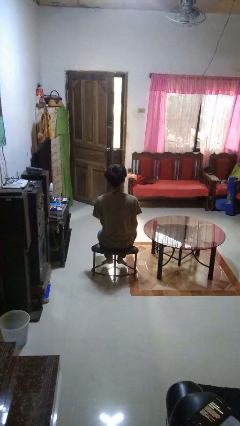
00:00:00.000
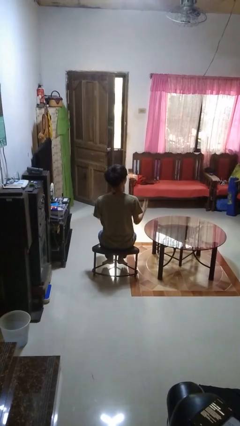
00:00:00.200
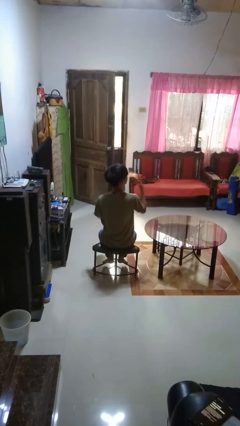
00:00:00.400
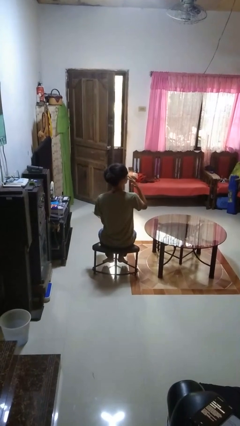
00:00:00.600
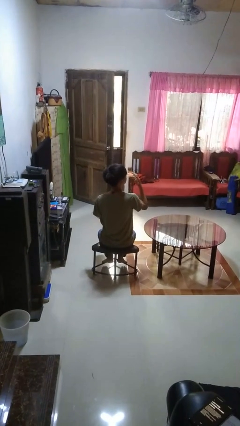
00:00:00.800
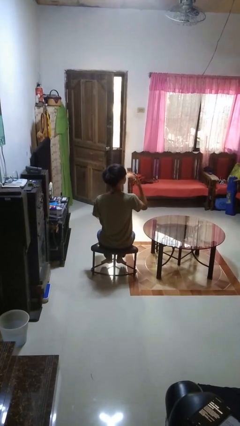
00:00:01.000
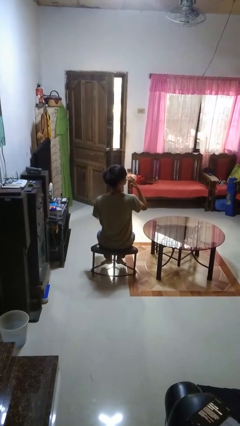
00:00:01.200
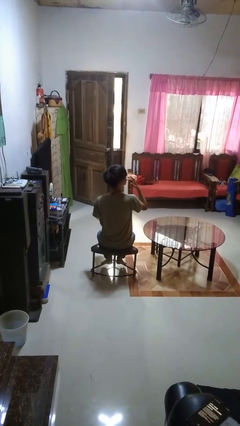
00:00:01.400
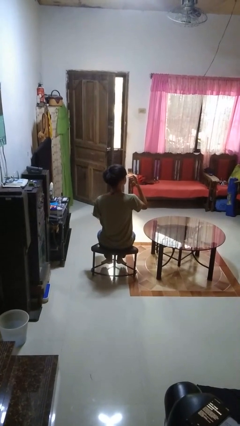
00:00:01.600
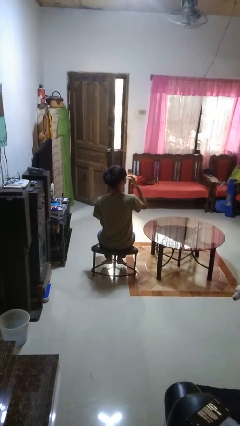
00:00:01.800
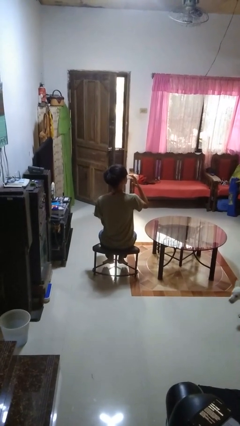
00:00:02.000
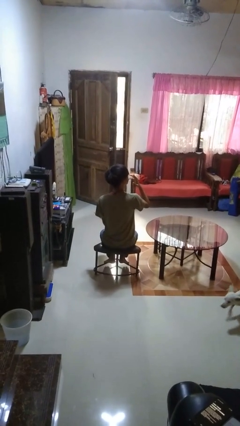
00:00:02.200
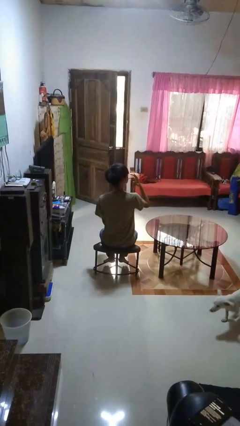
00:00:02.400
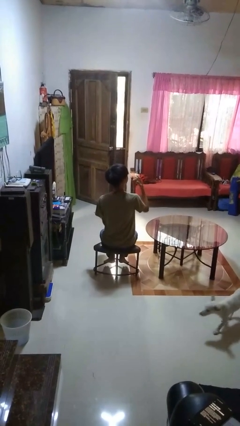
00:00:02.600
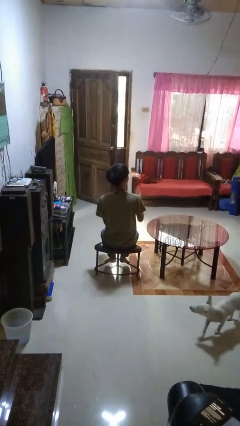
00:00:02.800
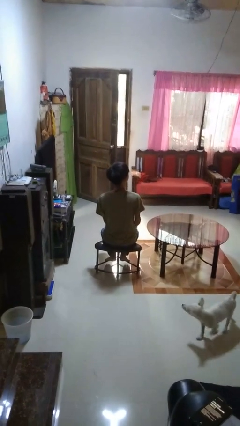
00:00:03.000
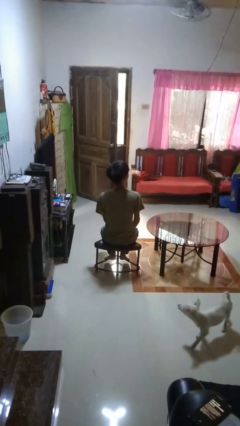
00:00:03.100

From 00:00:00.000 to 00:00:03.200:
person licks fingers

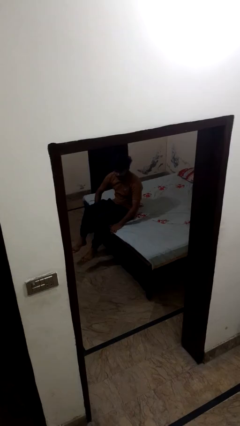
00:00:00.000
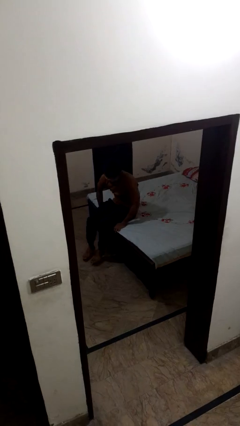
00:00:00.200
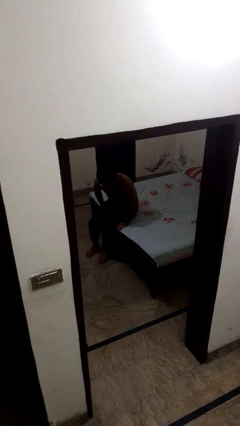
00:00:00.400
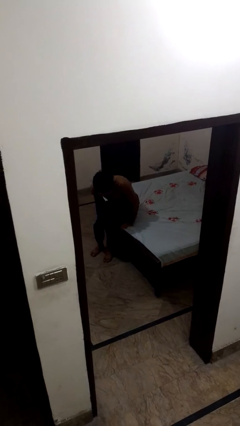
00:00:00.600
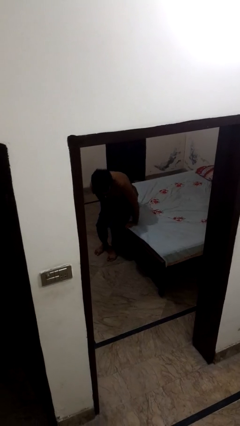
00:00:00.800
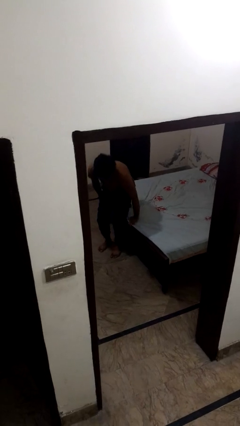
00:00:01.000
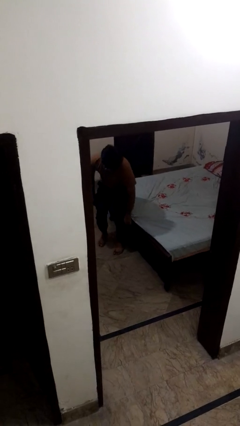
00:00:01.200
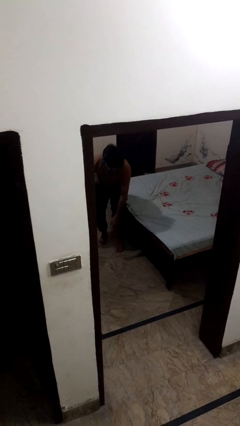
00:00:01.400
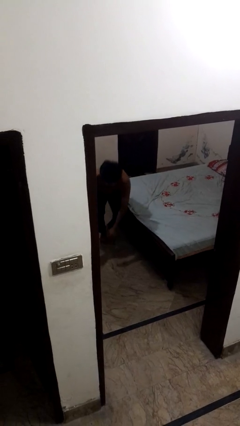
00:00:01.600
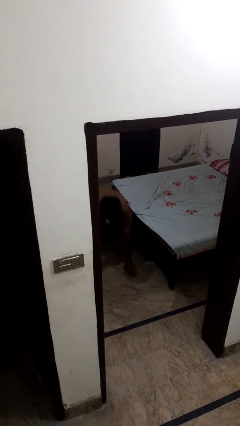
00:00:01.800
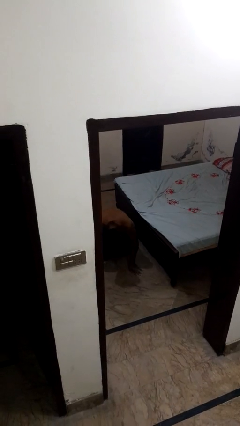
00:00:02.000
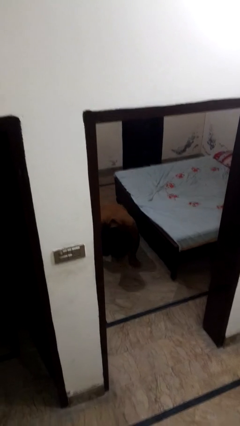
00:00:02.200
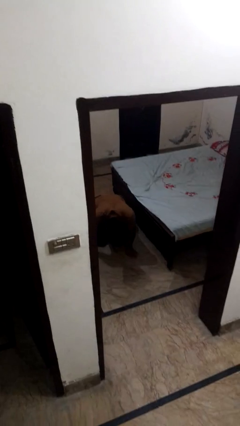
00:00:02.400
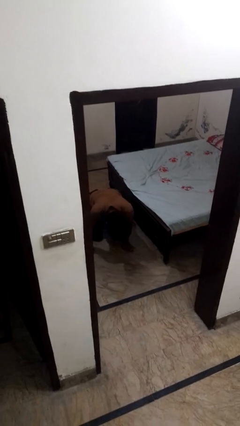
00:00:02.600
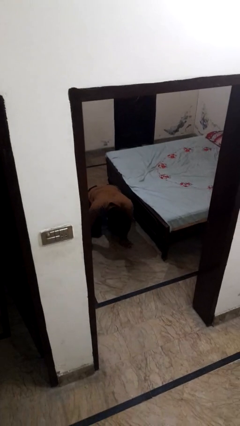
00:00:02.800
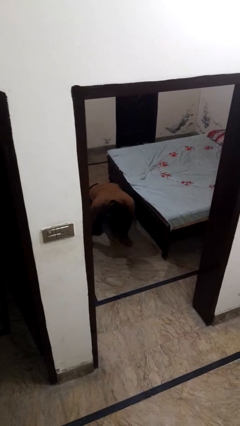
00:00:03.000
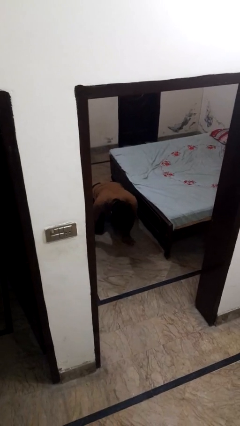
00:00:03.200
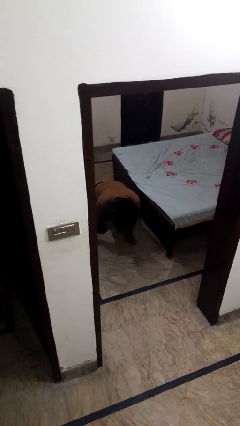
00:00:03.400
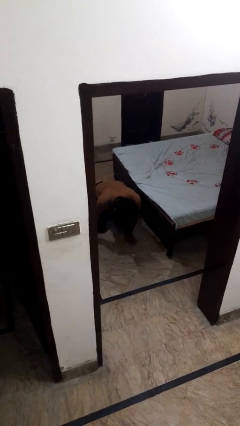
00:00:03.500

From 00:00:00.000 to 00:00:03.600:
person falls from bed

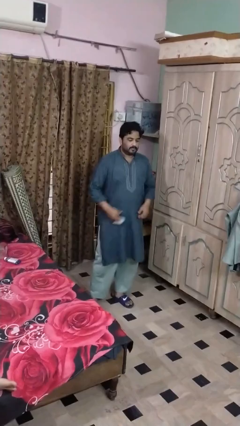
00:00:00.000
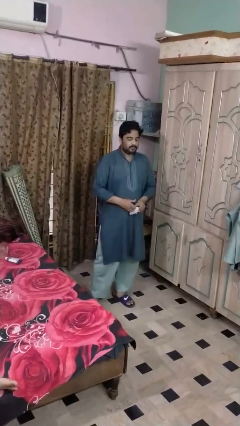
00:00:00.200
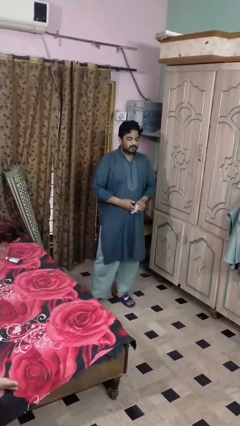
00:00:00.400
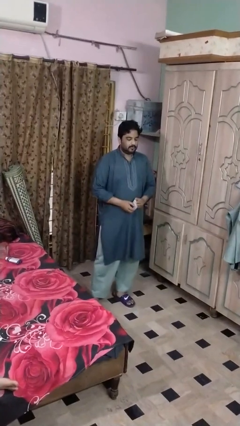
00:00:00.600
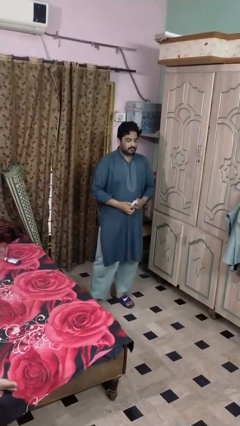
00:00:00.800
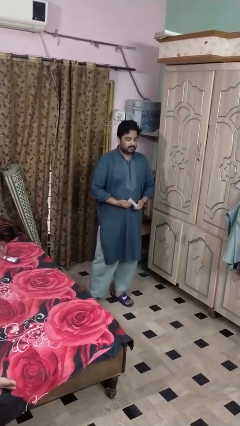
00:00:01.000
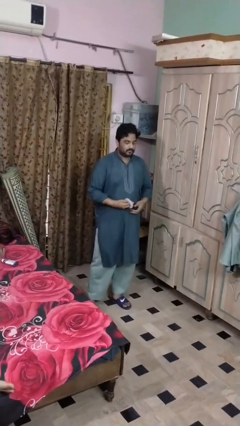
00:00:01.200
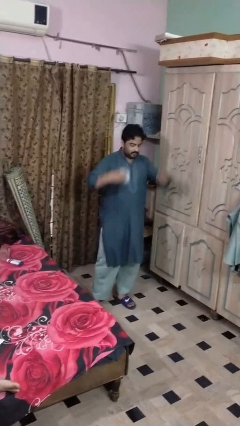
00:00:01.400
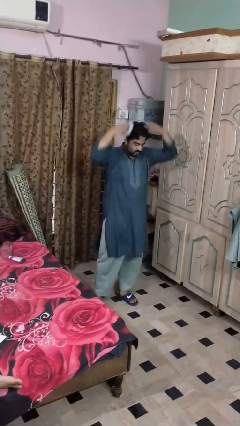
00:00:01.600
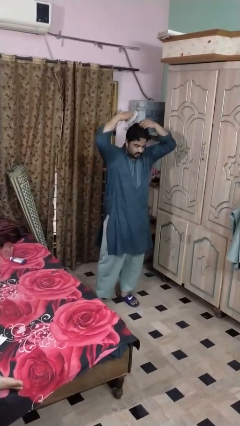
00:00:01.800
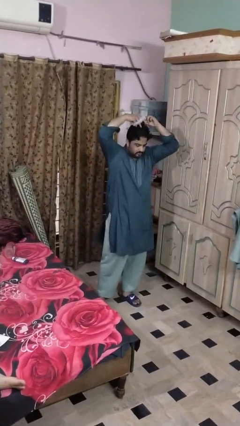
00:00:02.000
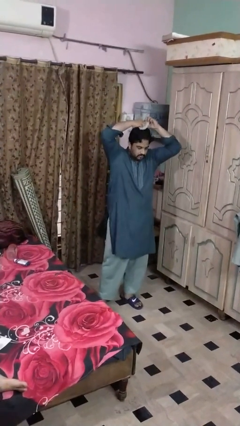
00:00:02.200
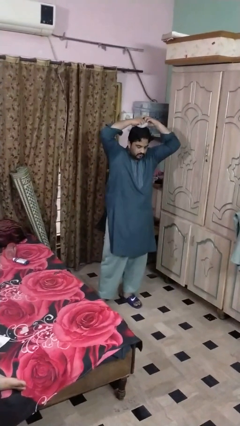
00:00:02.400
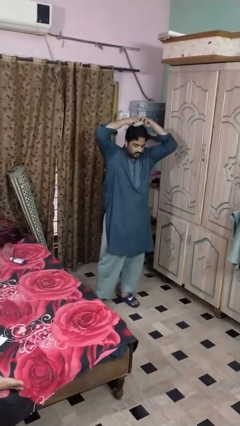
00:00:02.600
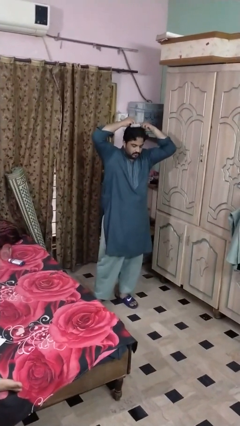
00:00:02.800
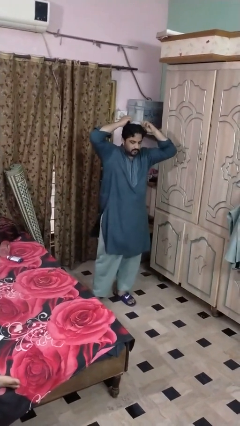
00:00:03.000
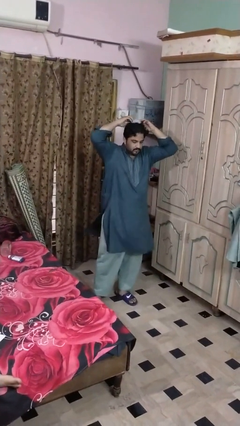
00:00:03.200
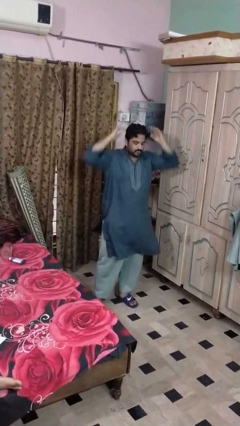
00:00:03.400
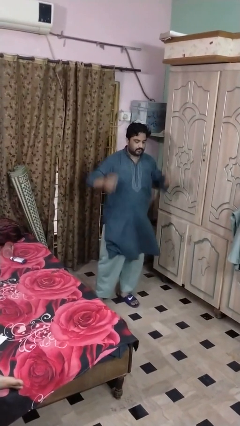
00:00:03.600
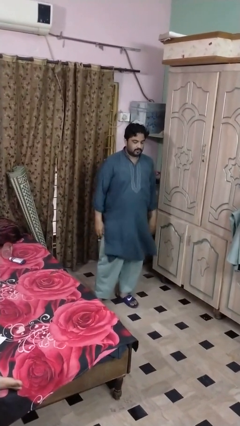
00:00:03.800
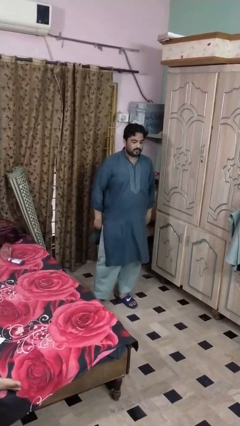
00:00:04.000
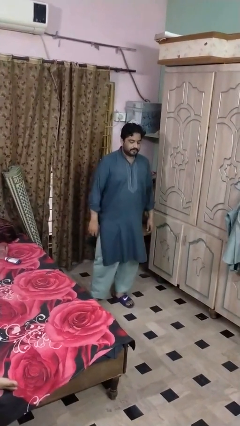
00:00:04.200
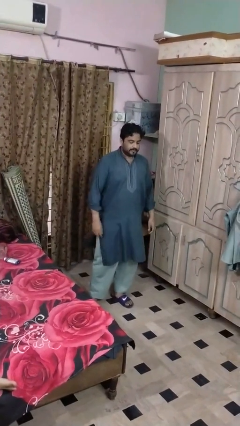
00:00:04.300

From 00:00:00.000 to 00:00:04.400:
person puts hair in ponytail

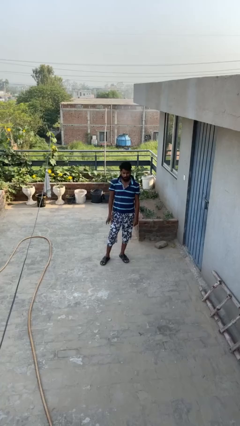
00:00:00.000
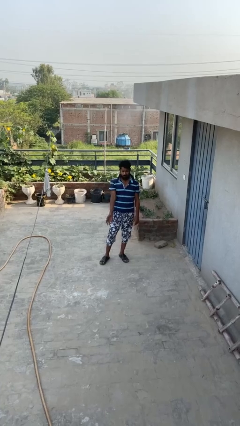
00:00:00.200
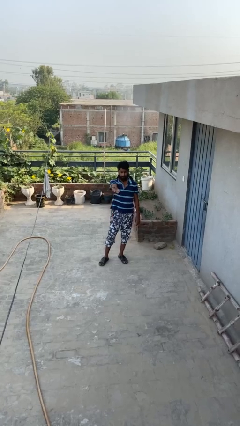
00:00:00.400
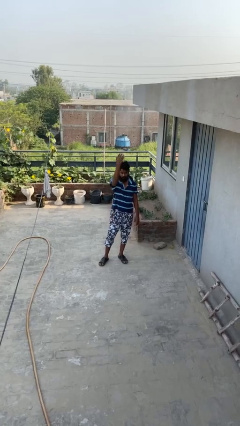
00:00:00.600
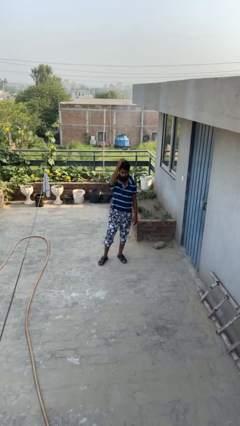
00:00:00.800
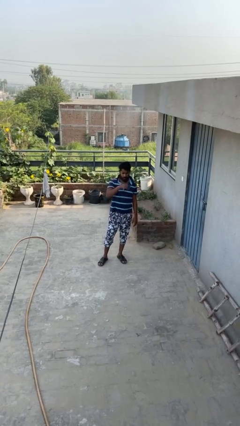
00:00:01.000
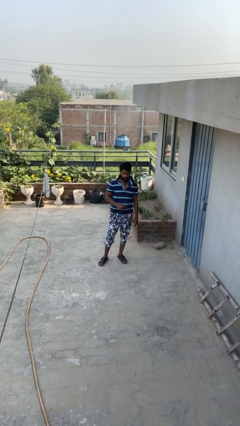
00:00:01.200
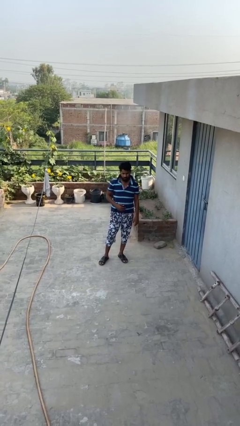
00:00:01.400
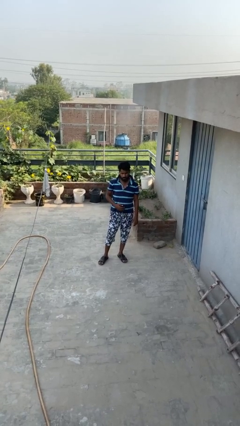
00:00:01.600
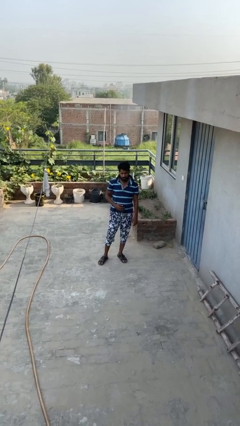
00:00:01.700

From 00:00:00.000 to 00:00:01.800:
person gestures swipe up

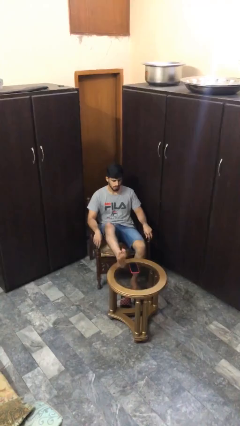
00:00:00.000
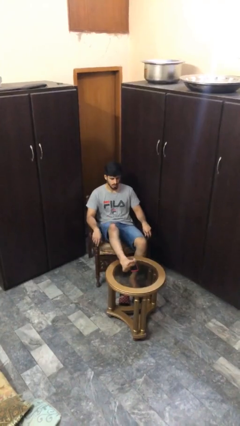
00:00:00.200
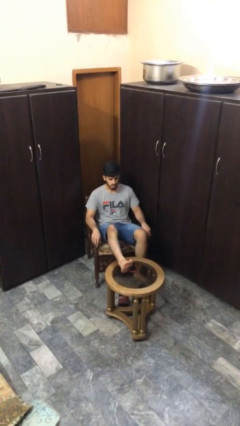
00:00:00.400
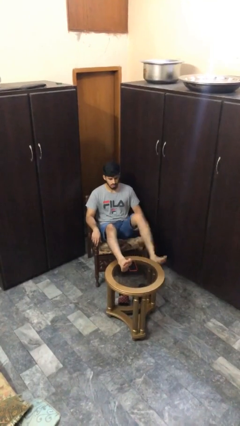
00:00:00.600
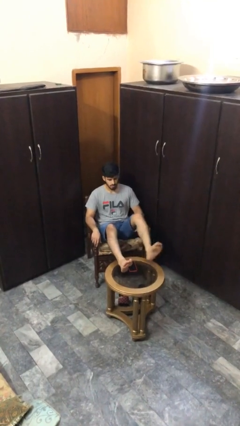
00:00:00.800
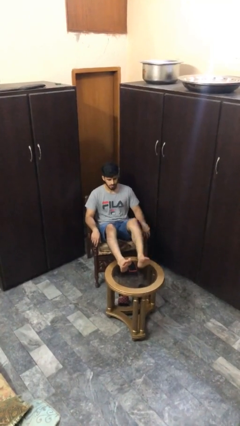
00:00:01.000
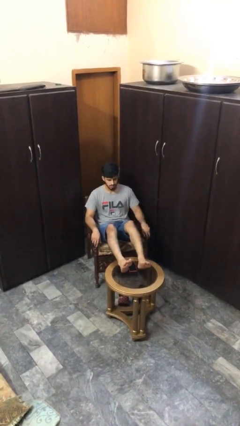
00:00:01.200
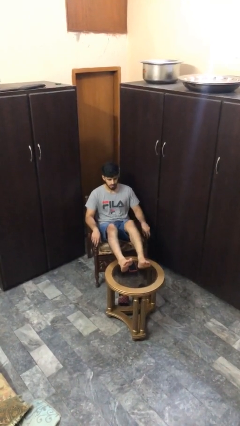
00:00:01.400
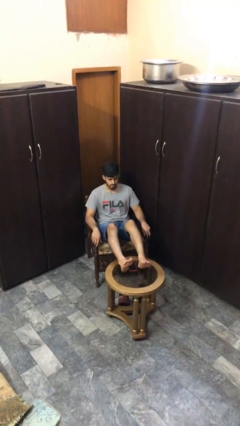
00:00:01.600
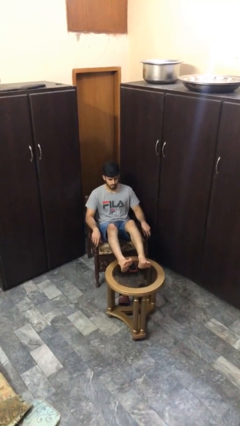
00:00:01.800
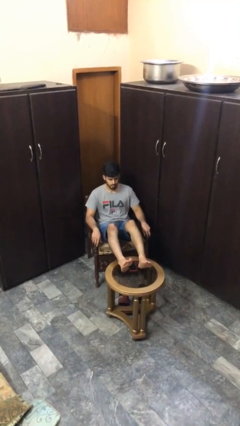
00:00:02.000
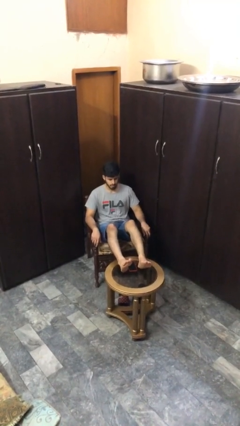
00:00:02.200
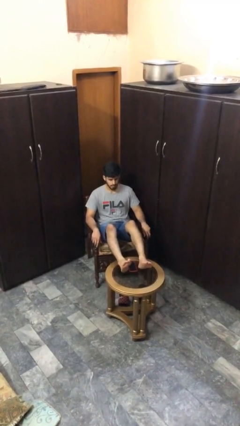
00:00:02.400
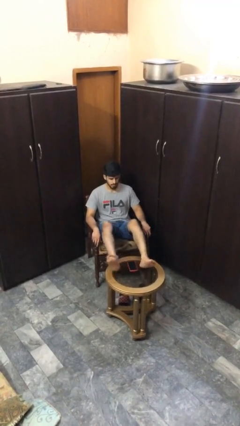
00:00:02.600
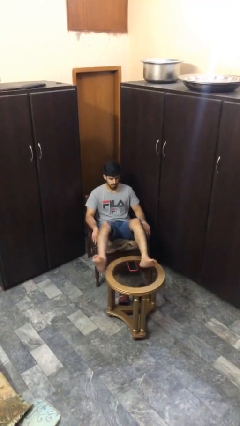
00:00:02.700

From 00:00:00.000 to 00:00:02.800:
person puts feet up

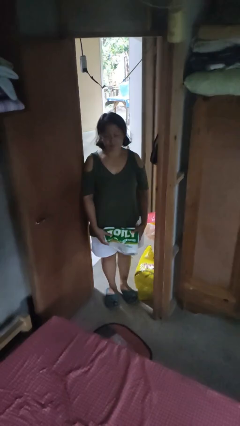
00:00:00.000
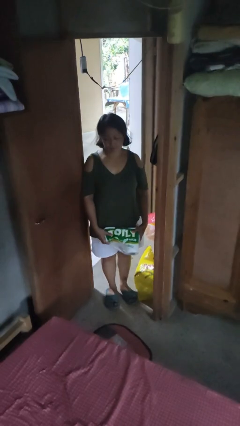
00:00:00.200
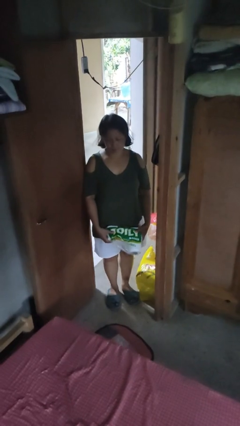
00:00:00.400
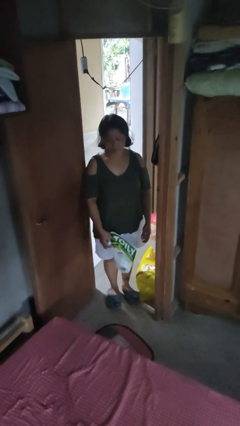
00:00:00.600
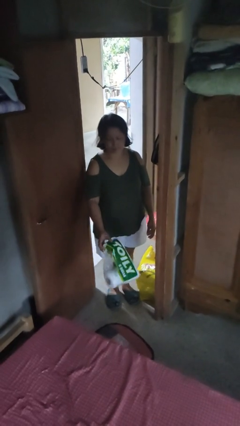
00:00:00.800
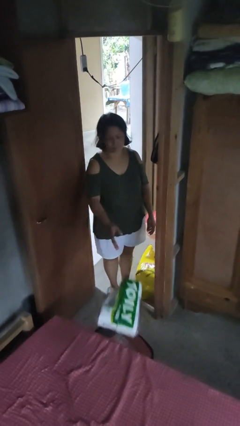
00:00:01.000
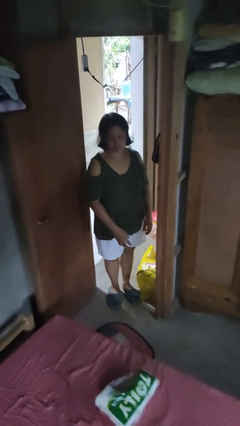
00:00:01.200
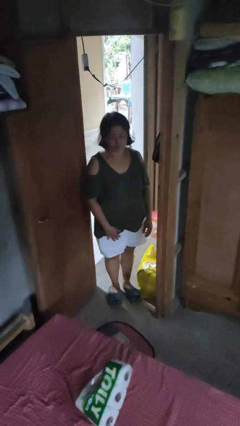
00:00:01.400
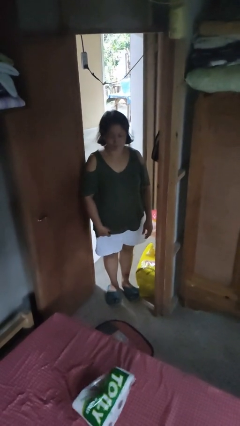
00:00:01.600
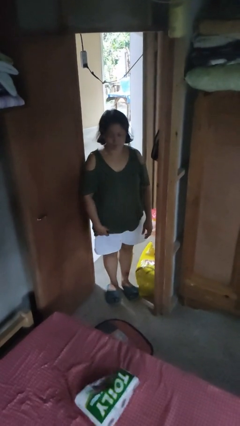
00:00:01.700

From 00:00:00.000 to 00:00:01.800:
person throws object on bed
